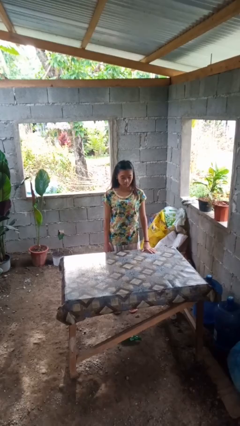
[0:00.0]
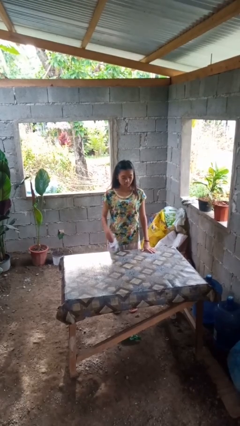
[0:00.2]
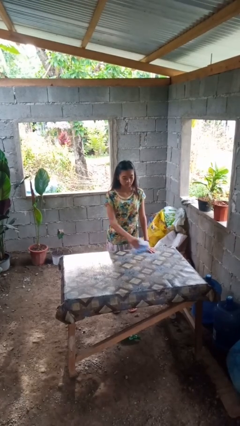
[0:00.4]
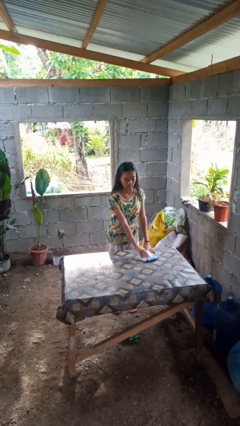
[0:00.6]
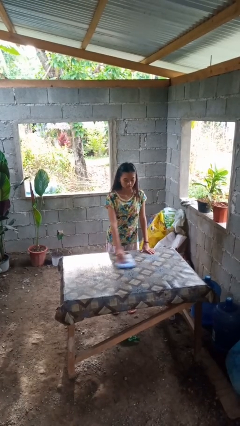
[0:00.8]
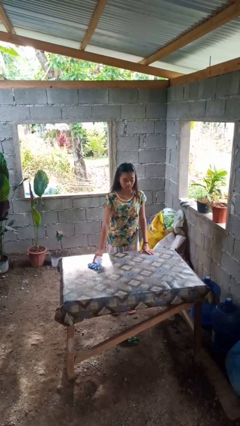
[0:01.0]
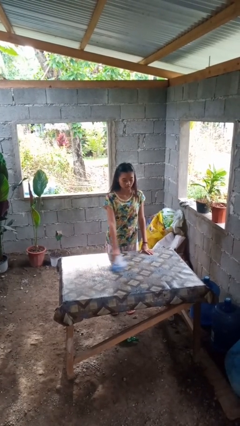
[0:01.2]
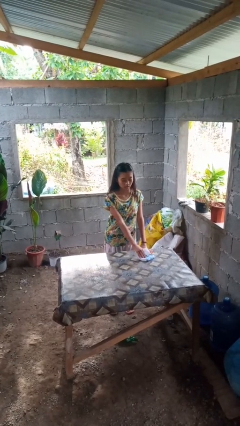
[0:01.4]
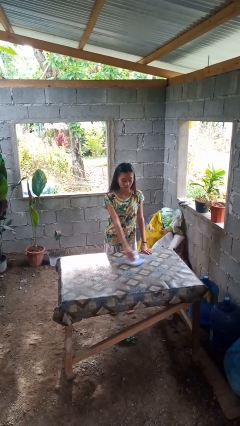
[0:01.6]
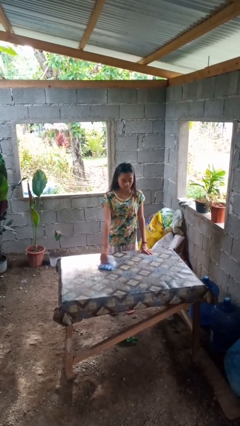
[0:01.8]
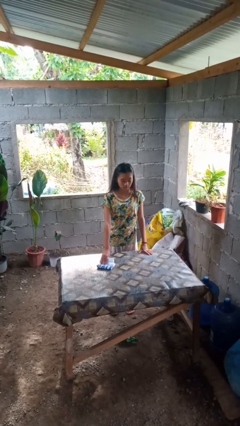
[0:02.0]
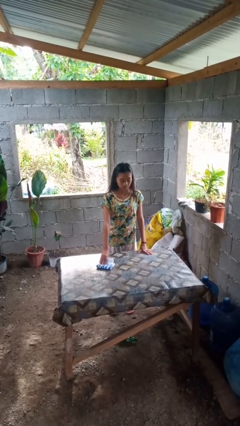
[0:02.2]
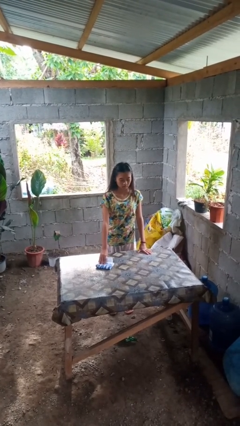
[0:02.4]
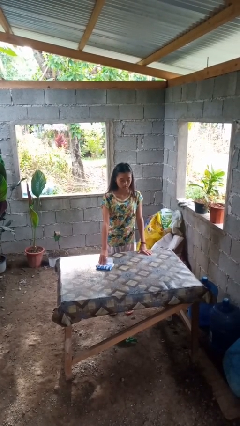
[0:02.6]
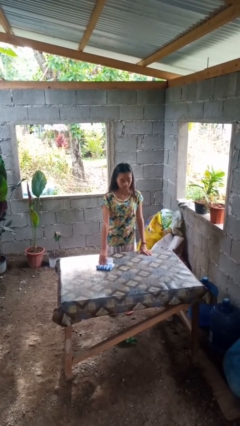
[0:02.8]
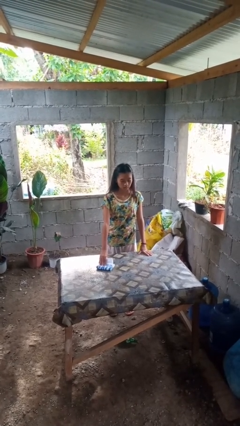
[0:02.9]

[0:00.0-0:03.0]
person cleans table with rag

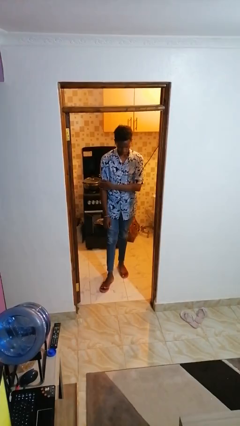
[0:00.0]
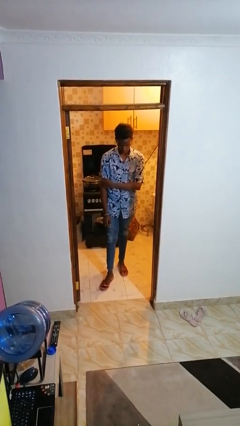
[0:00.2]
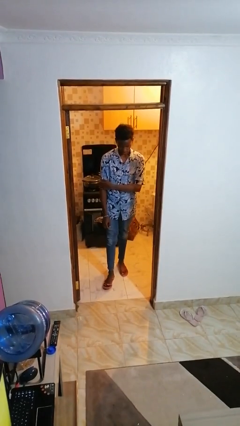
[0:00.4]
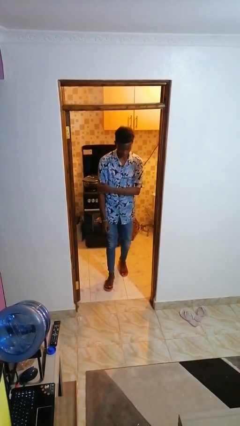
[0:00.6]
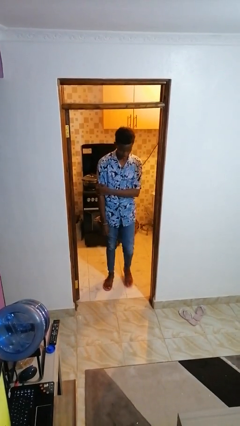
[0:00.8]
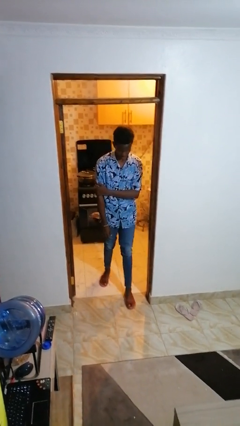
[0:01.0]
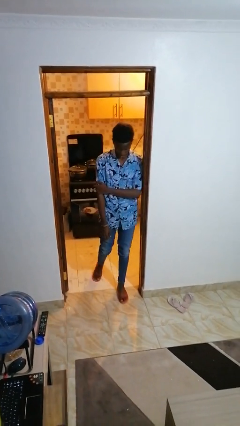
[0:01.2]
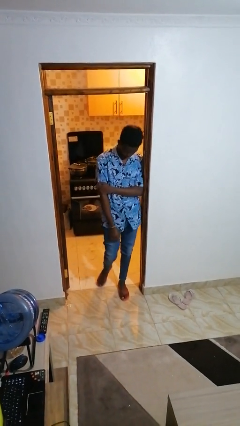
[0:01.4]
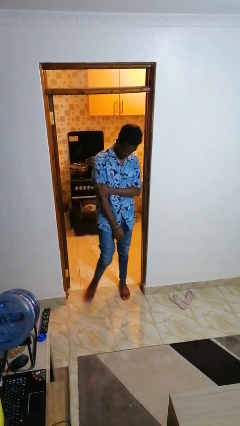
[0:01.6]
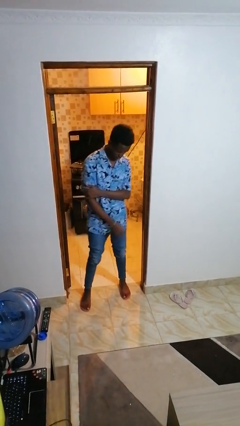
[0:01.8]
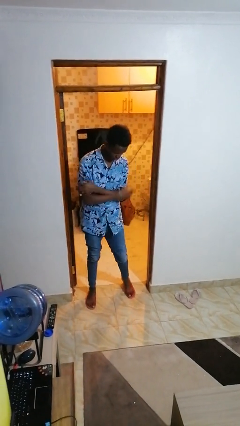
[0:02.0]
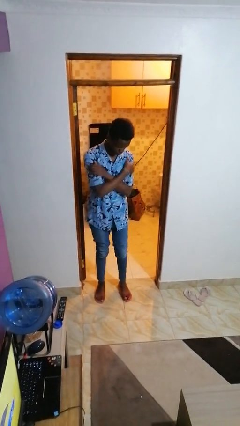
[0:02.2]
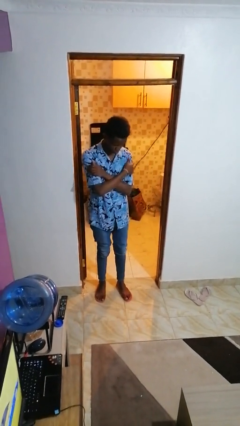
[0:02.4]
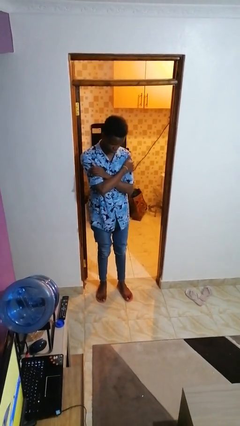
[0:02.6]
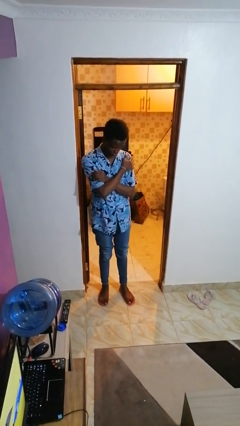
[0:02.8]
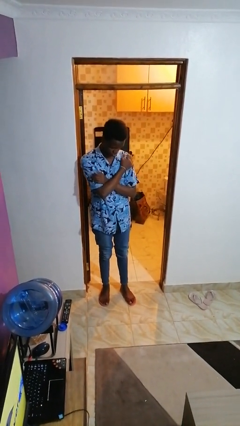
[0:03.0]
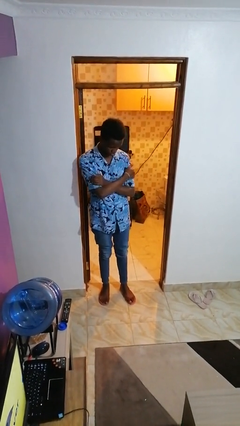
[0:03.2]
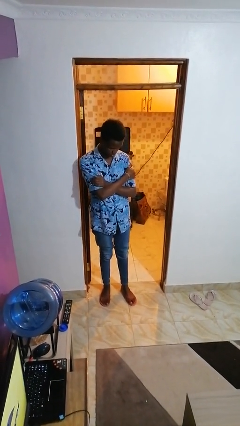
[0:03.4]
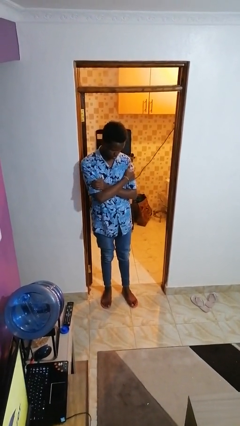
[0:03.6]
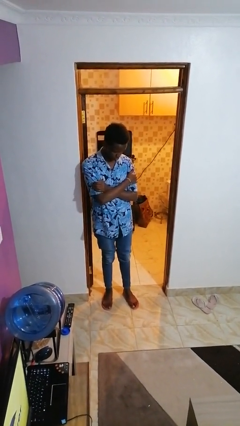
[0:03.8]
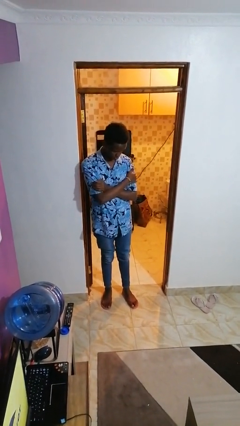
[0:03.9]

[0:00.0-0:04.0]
person bumps into wall

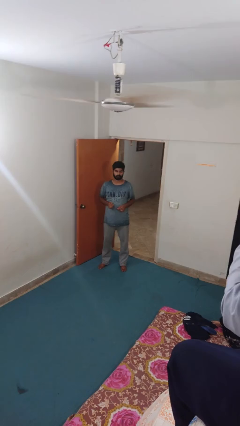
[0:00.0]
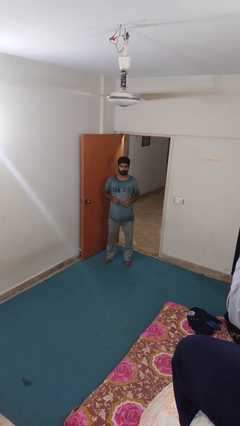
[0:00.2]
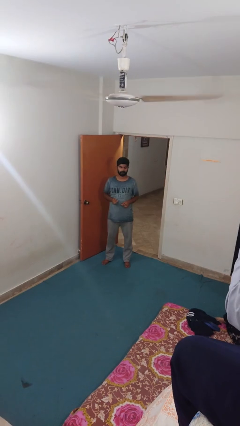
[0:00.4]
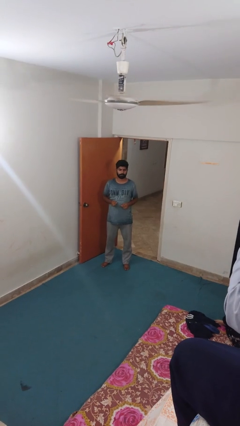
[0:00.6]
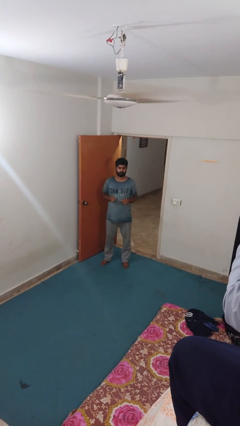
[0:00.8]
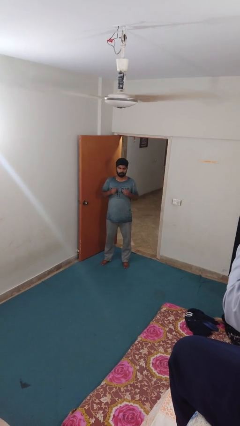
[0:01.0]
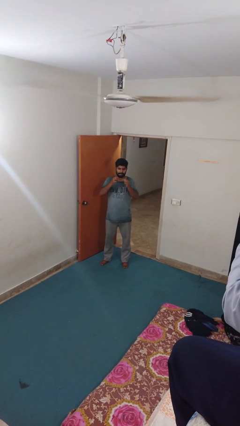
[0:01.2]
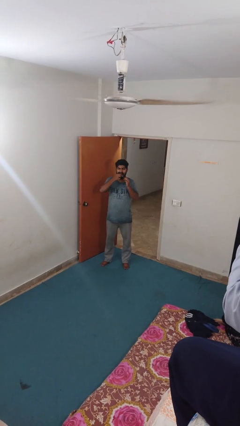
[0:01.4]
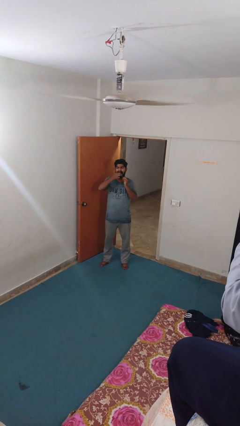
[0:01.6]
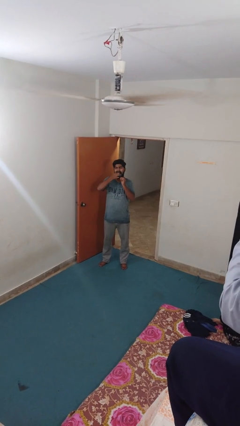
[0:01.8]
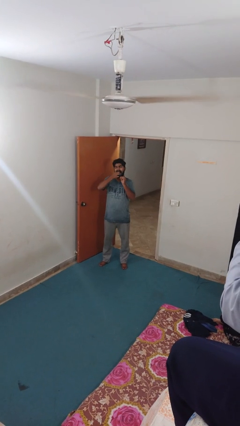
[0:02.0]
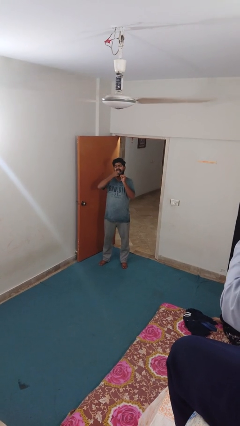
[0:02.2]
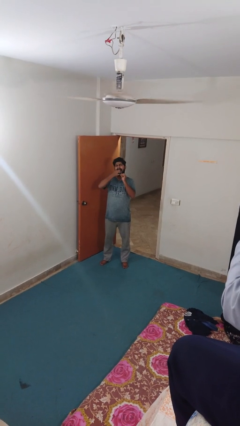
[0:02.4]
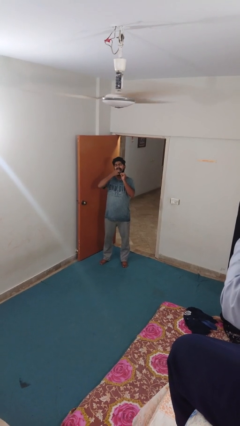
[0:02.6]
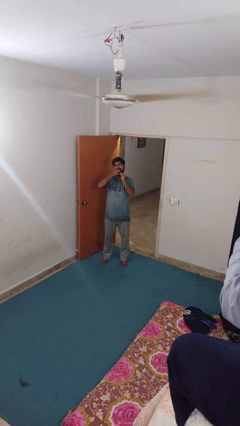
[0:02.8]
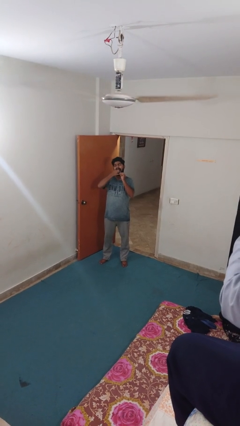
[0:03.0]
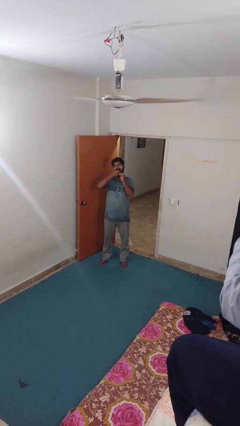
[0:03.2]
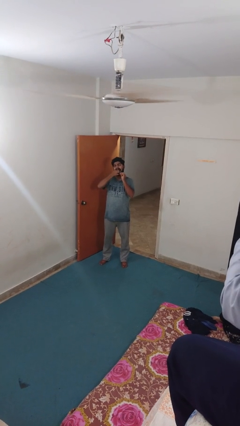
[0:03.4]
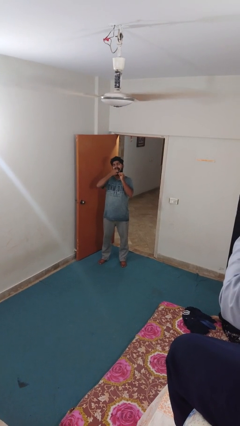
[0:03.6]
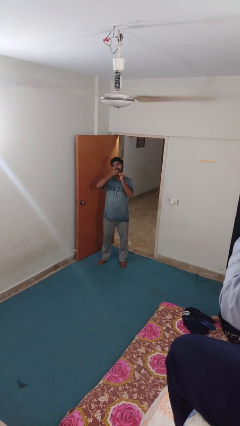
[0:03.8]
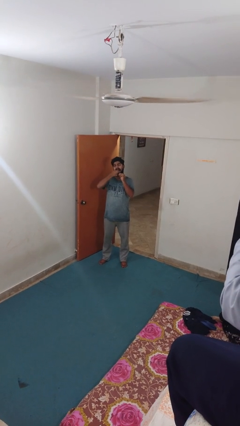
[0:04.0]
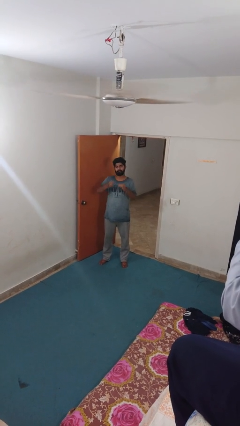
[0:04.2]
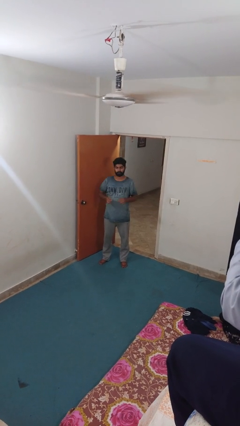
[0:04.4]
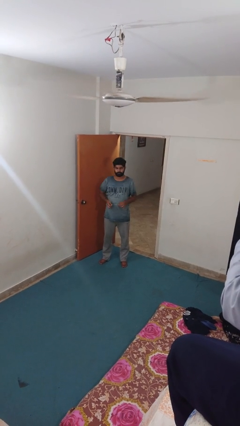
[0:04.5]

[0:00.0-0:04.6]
person flosses

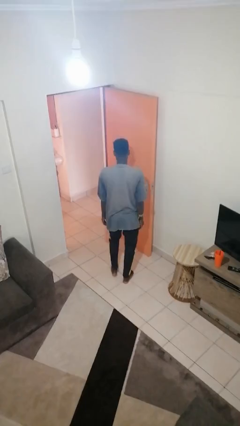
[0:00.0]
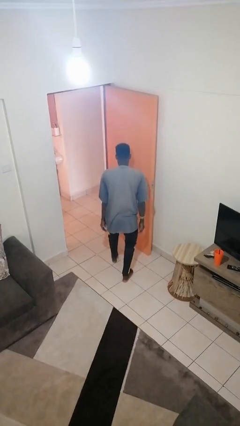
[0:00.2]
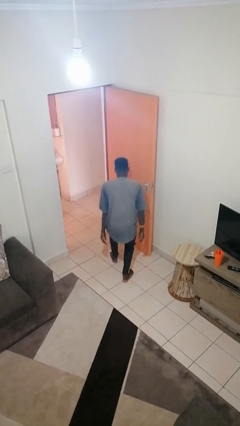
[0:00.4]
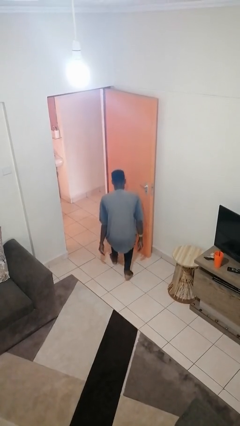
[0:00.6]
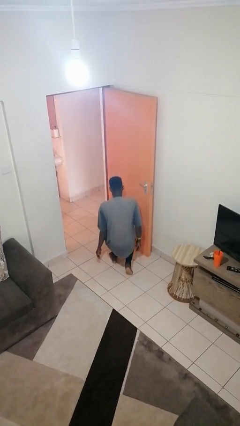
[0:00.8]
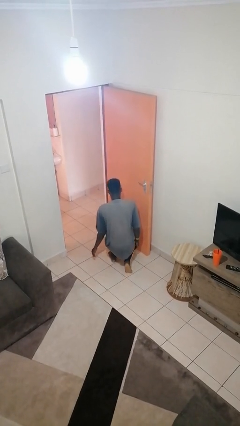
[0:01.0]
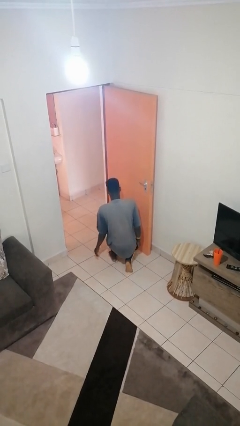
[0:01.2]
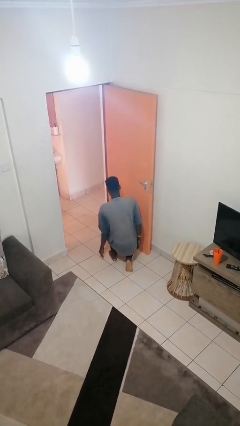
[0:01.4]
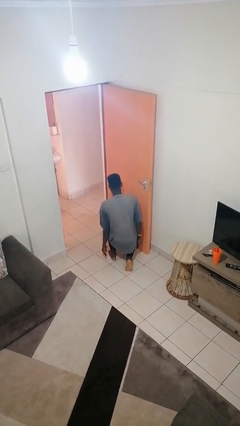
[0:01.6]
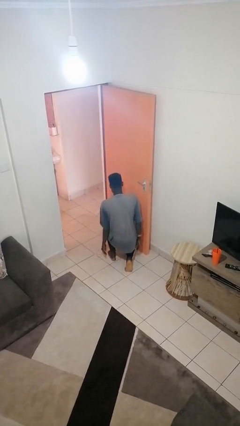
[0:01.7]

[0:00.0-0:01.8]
person kneels

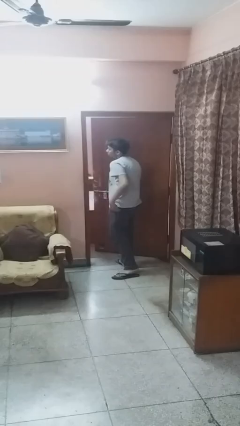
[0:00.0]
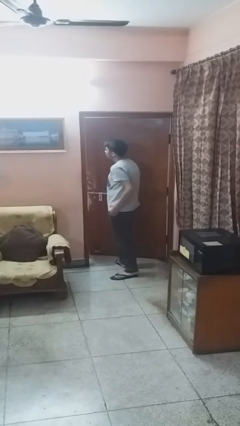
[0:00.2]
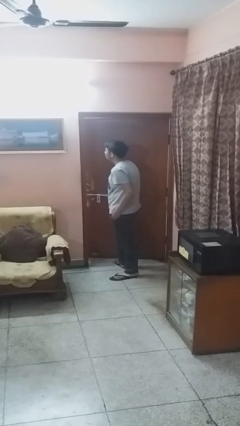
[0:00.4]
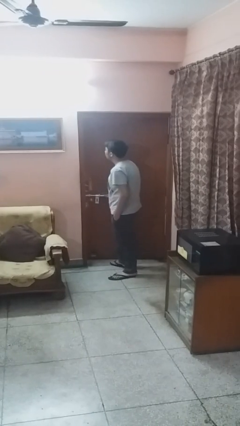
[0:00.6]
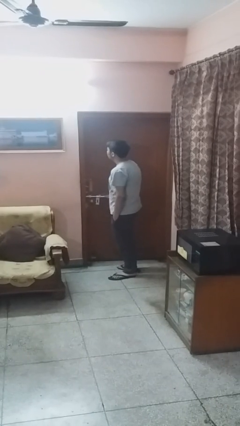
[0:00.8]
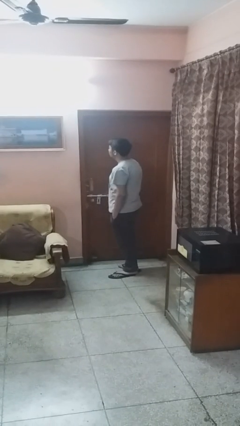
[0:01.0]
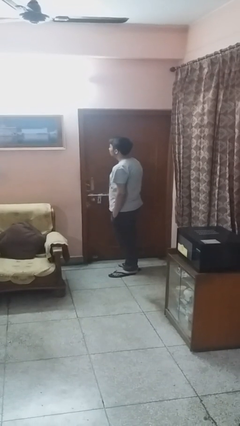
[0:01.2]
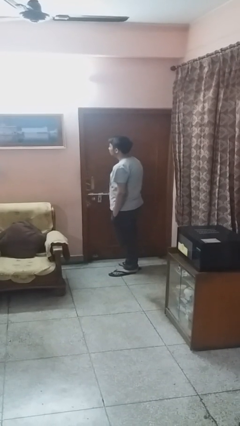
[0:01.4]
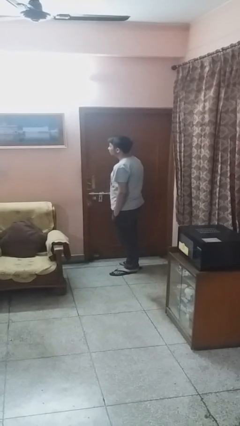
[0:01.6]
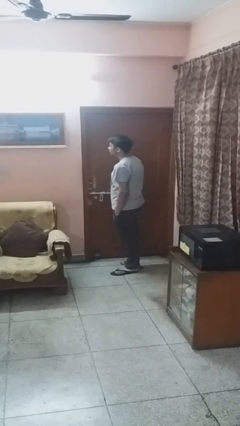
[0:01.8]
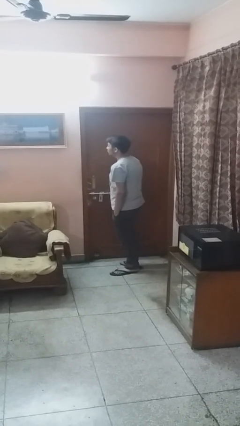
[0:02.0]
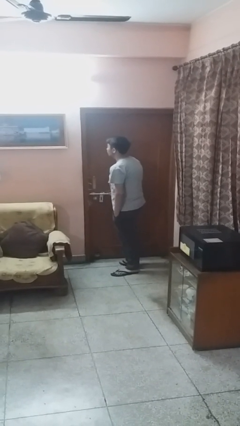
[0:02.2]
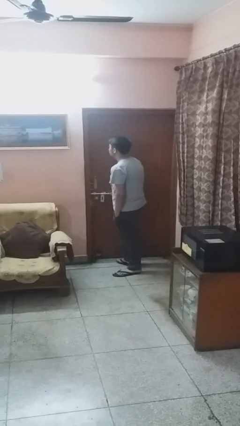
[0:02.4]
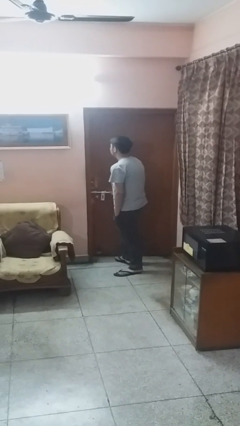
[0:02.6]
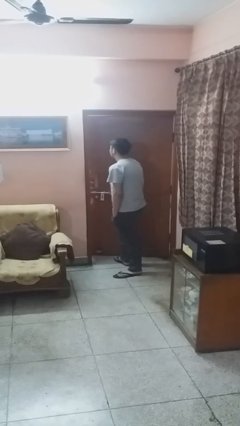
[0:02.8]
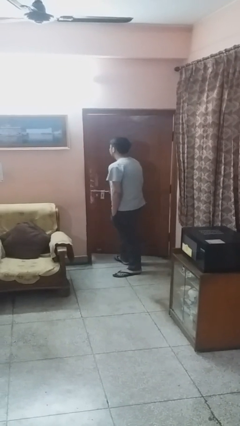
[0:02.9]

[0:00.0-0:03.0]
person closes facility door

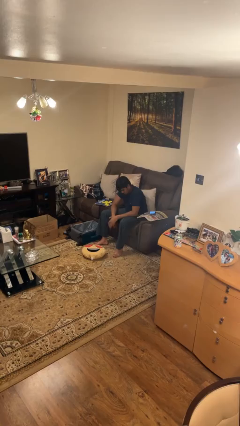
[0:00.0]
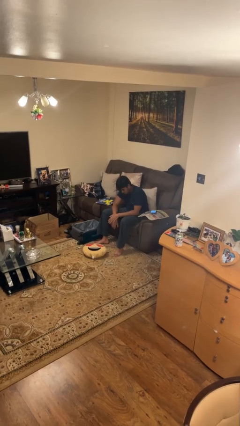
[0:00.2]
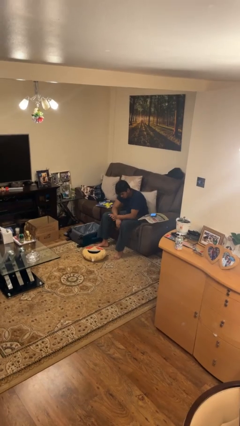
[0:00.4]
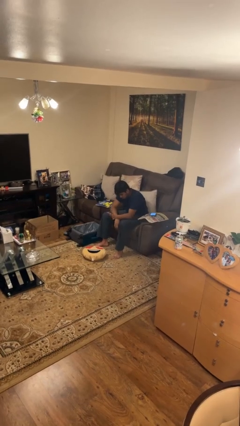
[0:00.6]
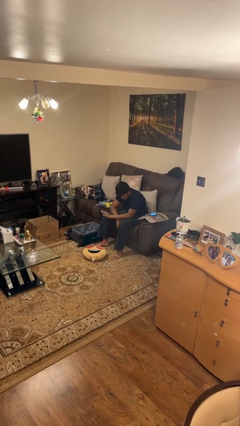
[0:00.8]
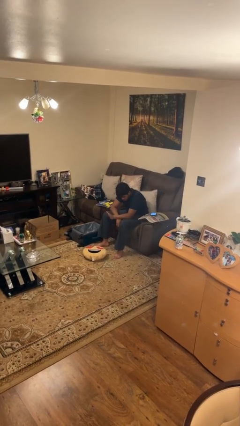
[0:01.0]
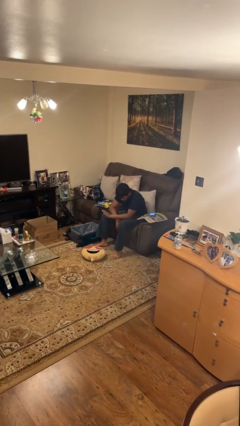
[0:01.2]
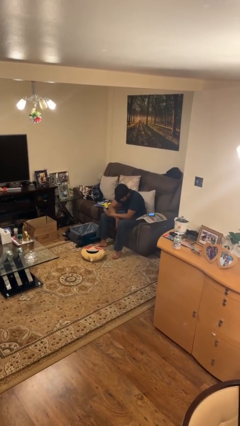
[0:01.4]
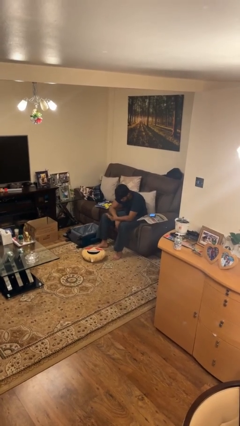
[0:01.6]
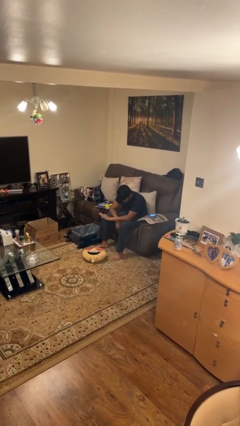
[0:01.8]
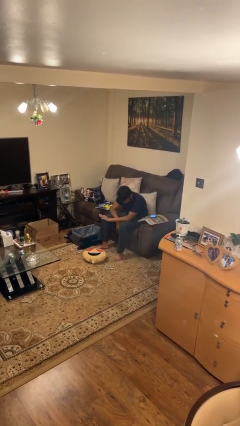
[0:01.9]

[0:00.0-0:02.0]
person waves hand over object
